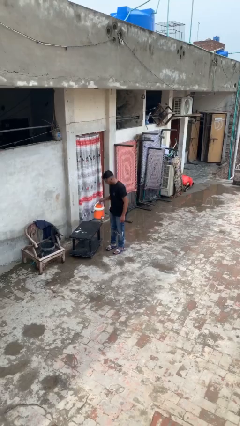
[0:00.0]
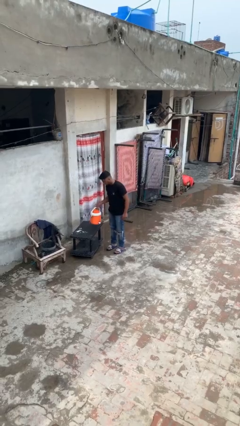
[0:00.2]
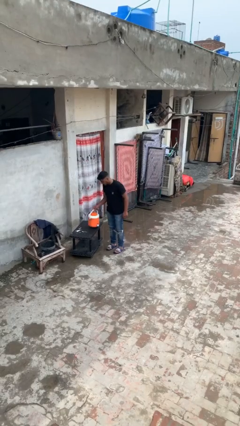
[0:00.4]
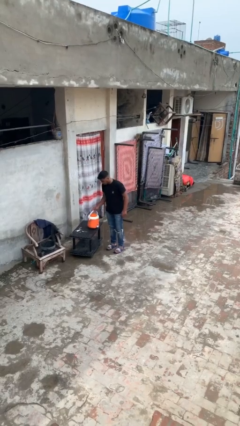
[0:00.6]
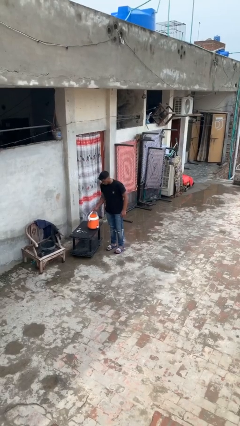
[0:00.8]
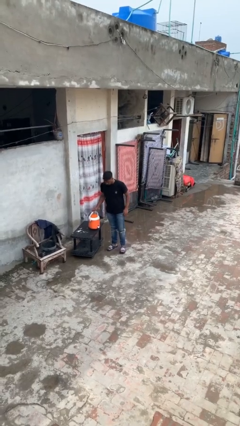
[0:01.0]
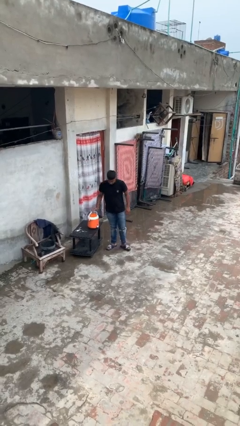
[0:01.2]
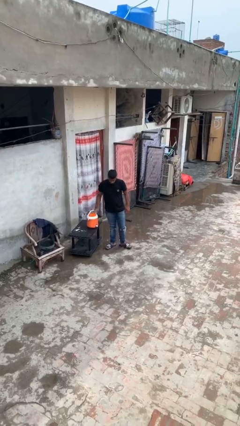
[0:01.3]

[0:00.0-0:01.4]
person puts down object on table

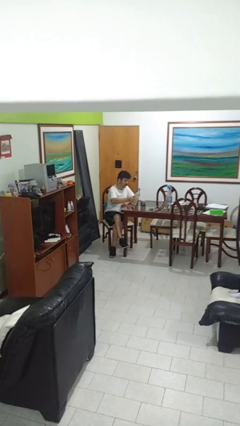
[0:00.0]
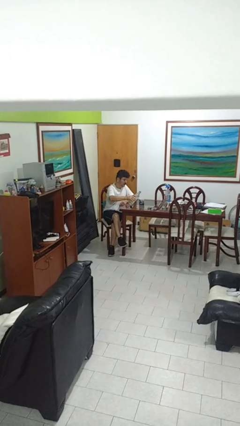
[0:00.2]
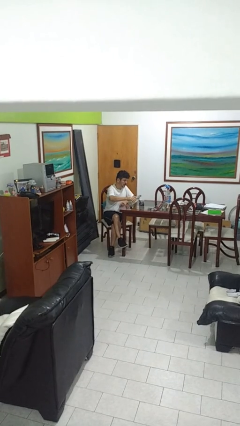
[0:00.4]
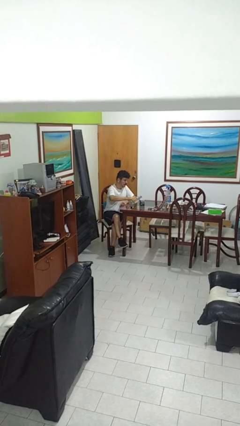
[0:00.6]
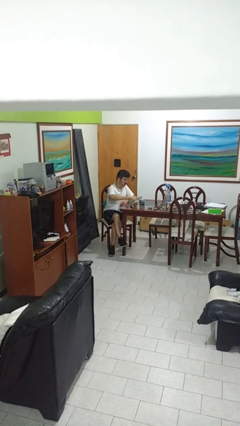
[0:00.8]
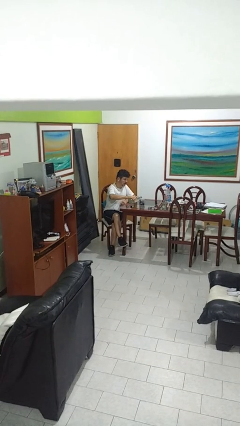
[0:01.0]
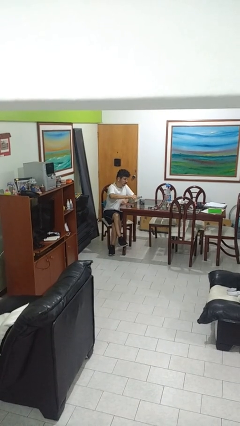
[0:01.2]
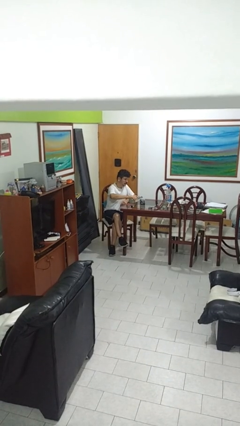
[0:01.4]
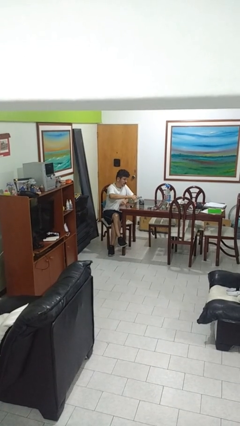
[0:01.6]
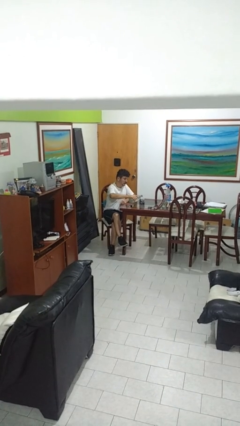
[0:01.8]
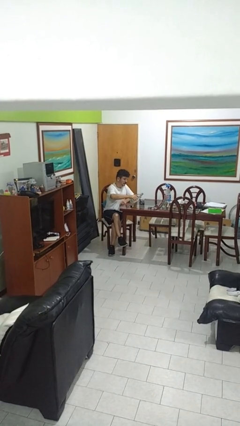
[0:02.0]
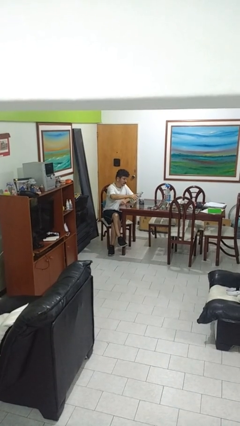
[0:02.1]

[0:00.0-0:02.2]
person pours liquid into cup

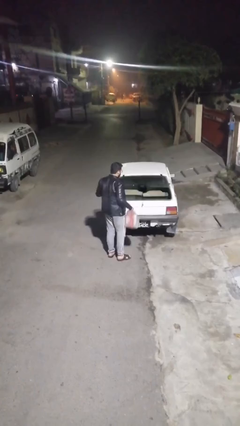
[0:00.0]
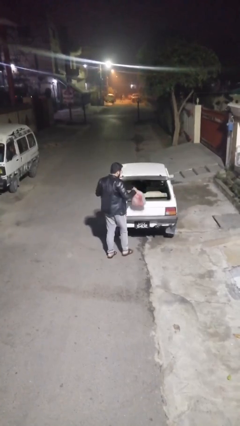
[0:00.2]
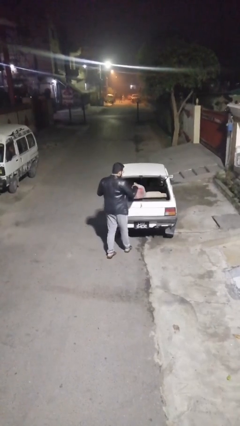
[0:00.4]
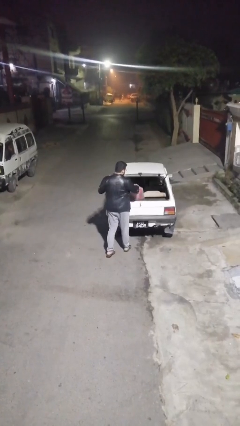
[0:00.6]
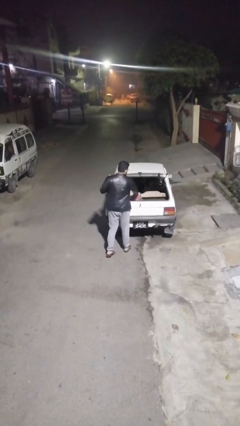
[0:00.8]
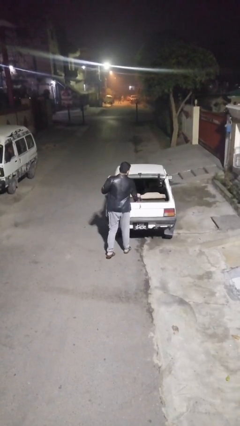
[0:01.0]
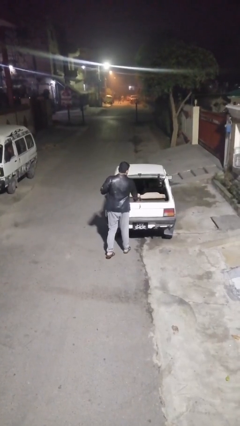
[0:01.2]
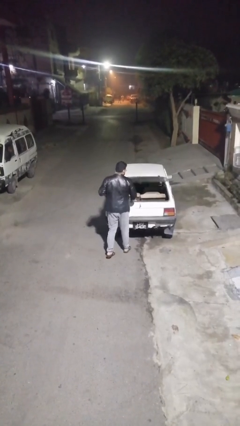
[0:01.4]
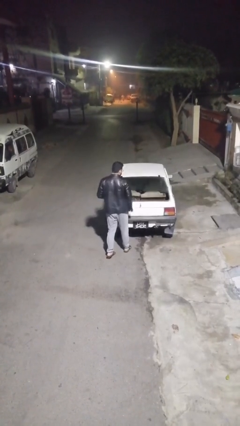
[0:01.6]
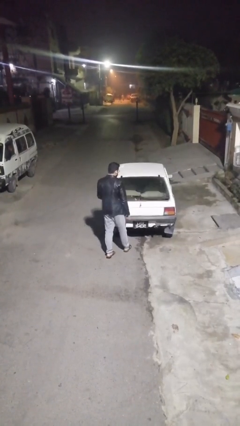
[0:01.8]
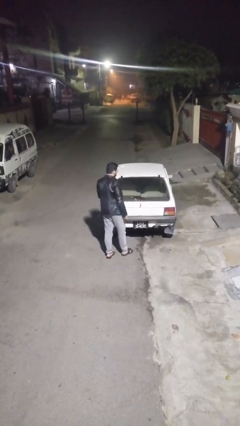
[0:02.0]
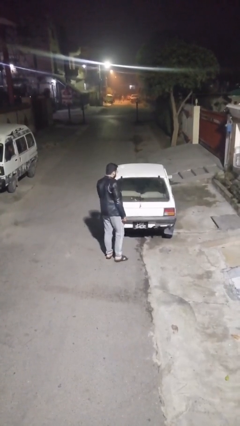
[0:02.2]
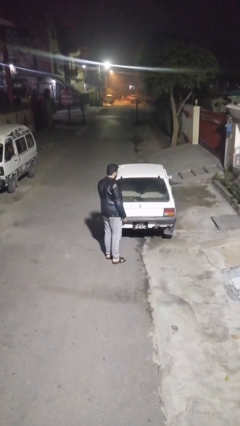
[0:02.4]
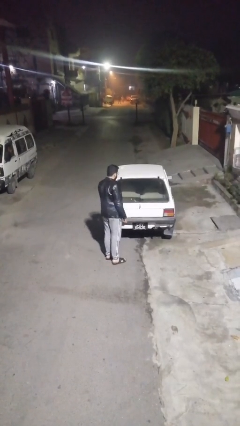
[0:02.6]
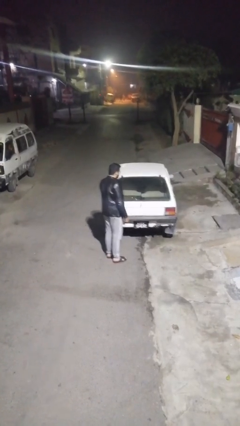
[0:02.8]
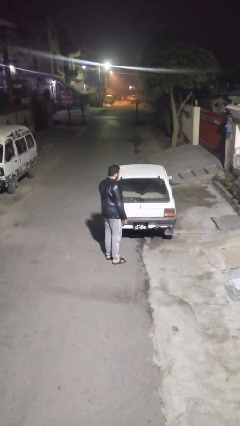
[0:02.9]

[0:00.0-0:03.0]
person loads car

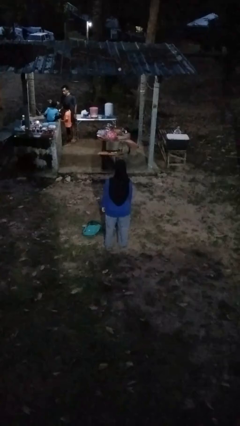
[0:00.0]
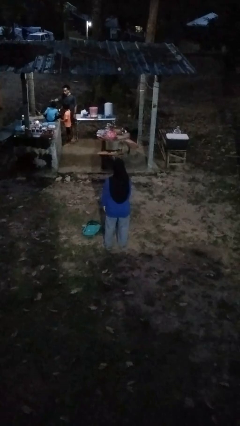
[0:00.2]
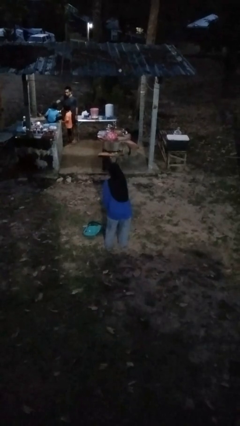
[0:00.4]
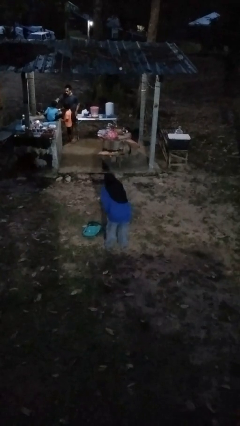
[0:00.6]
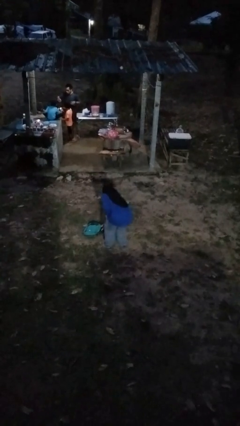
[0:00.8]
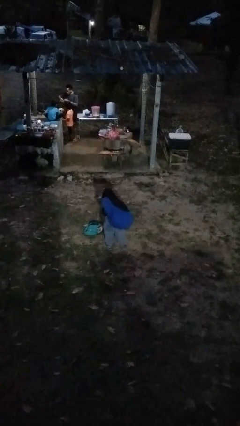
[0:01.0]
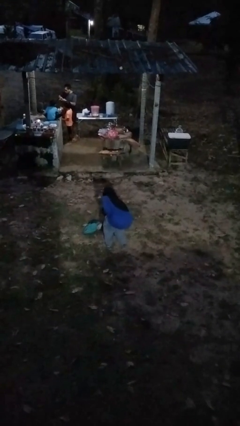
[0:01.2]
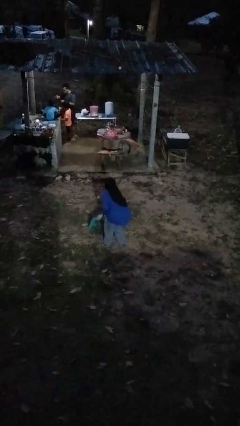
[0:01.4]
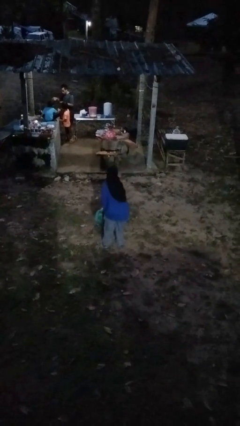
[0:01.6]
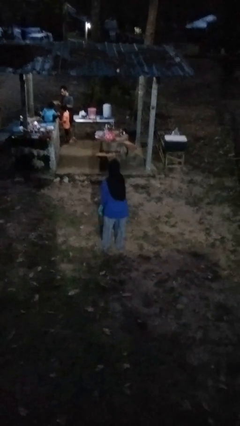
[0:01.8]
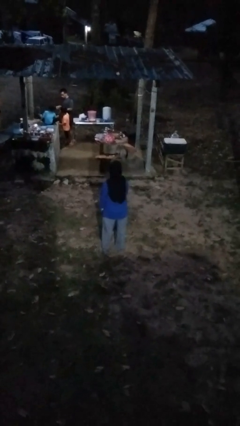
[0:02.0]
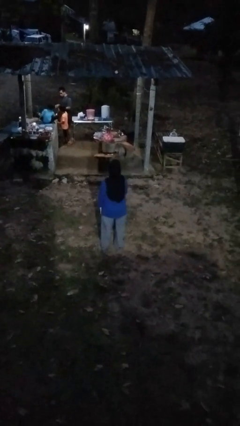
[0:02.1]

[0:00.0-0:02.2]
person picks up object from floor

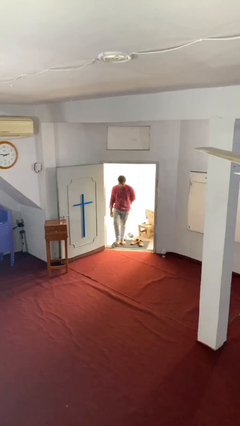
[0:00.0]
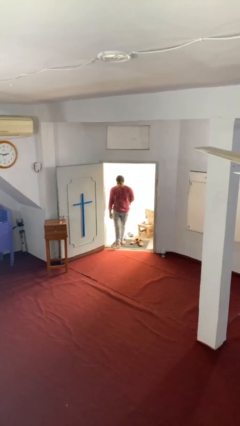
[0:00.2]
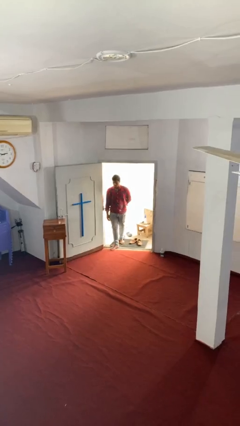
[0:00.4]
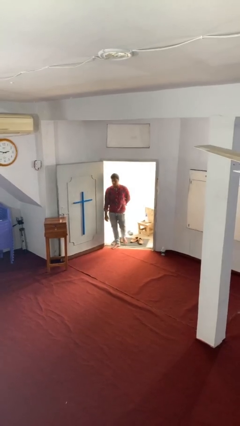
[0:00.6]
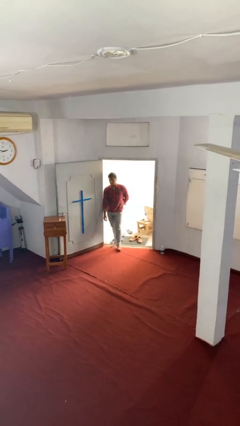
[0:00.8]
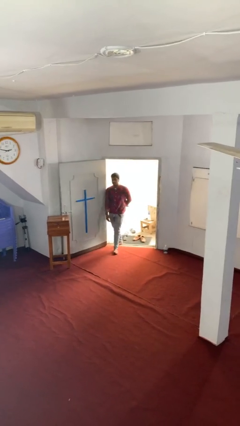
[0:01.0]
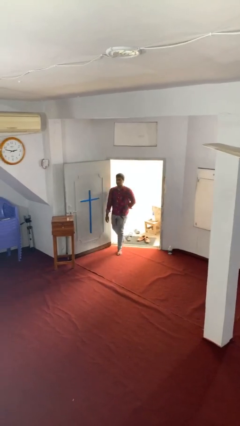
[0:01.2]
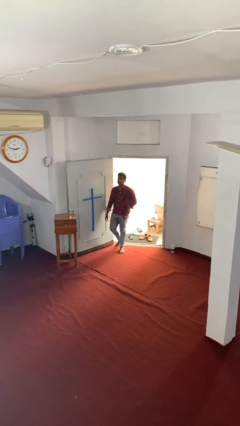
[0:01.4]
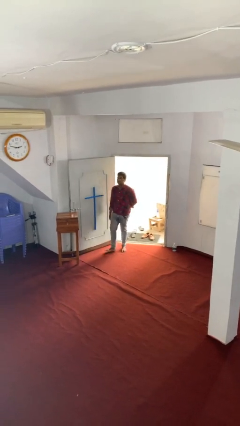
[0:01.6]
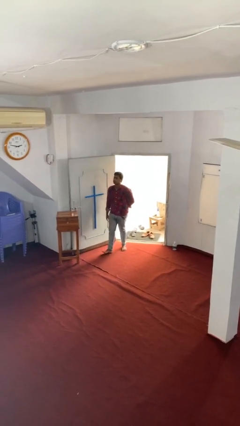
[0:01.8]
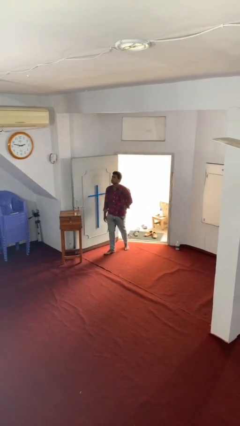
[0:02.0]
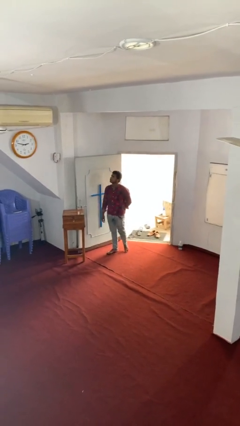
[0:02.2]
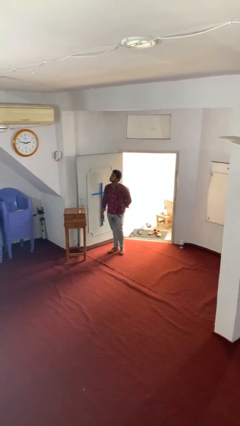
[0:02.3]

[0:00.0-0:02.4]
person enters scene through structure

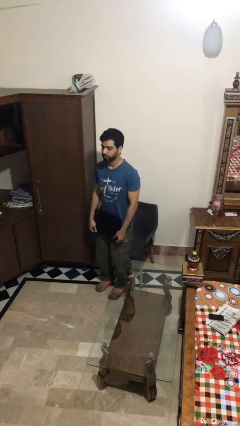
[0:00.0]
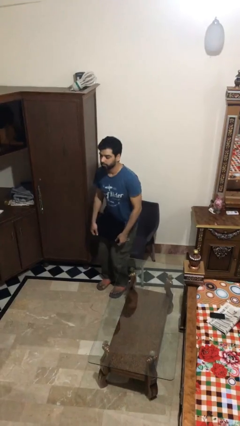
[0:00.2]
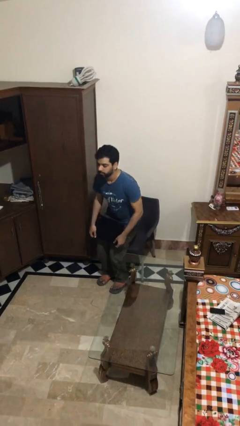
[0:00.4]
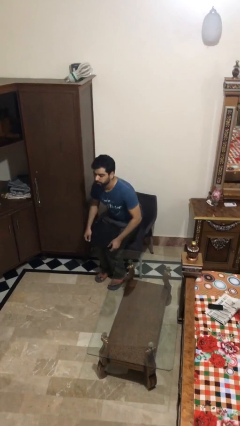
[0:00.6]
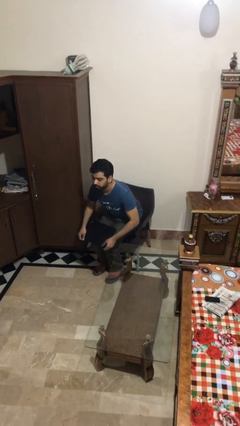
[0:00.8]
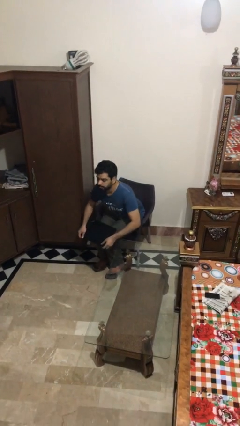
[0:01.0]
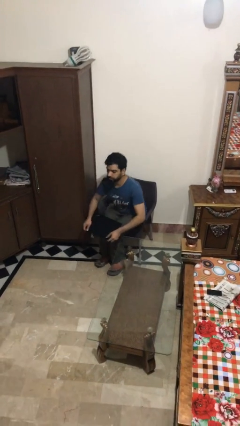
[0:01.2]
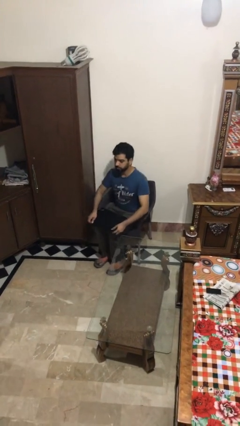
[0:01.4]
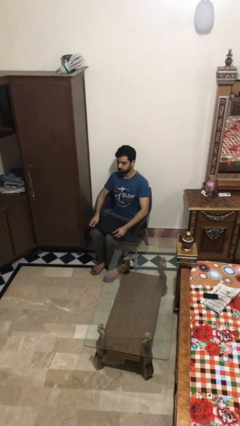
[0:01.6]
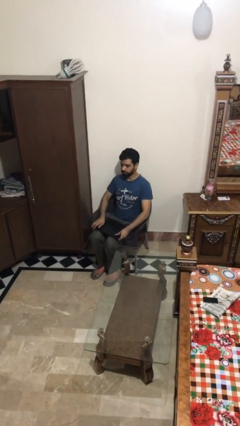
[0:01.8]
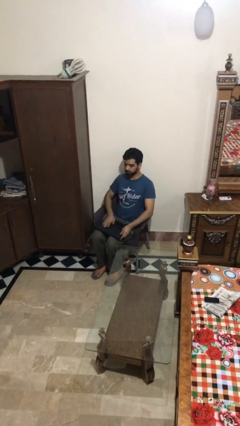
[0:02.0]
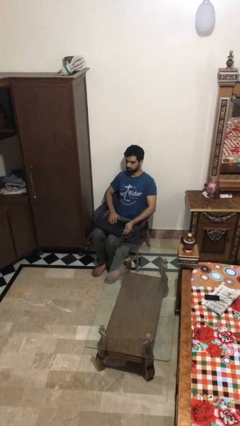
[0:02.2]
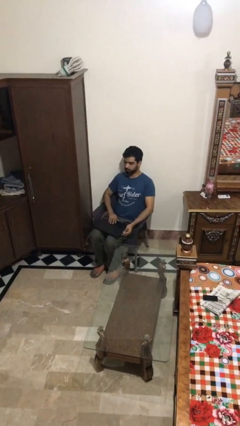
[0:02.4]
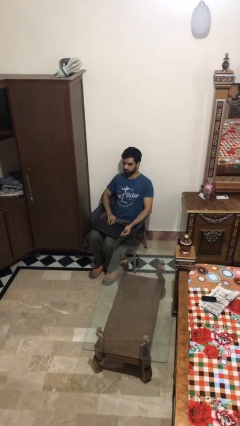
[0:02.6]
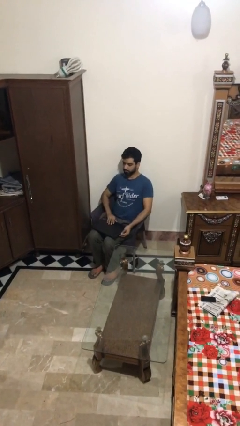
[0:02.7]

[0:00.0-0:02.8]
person sits down

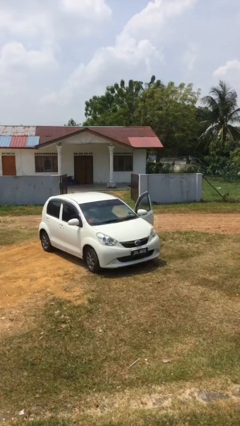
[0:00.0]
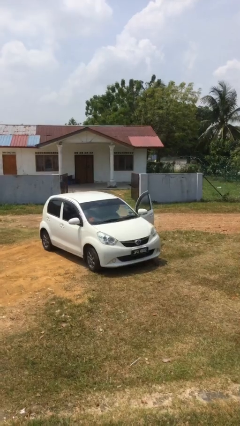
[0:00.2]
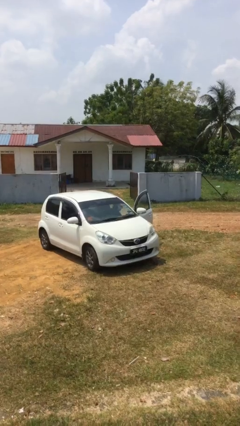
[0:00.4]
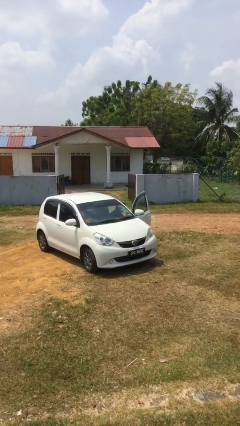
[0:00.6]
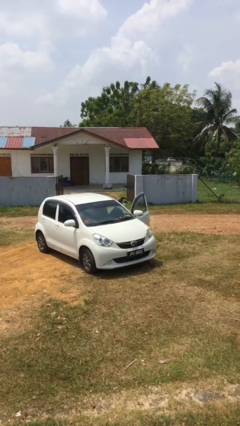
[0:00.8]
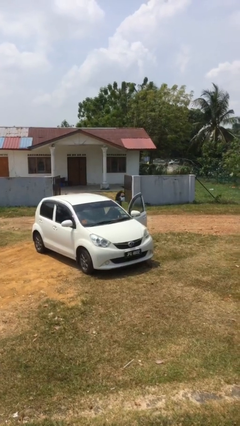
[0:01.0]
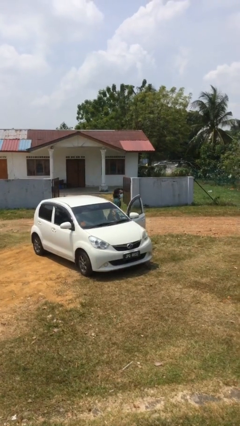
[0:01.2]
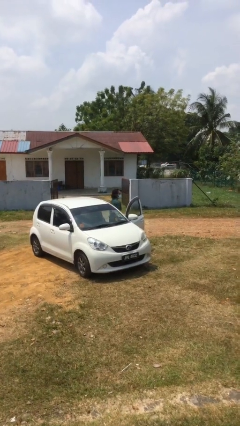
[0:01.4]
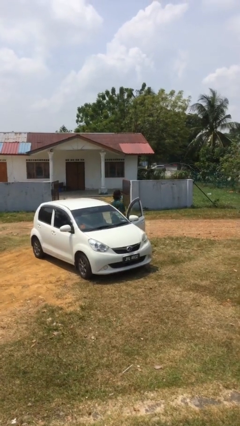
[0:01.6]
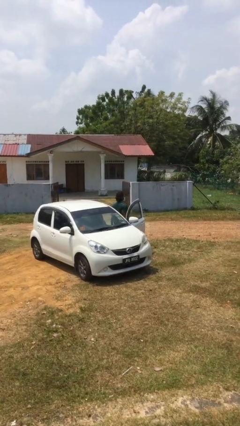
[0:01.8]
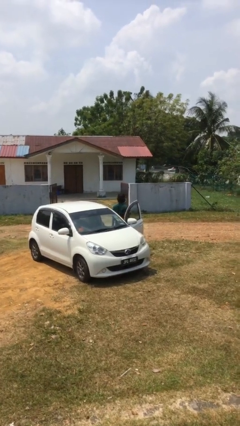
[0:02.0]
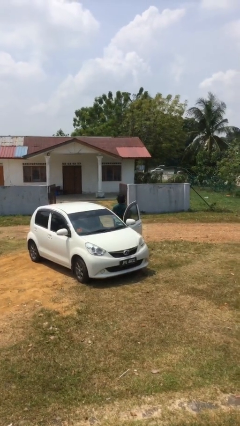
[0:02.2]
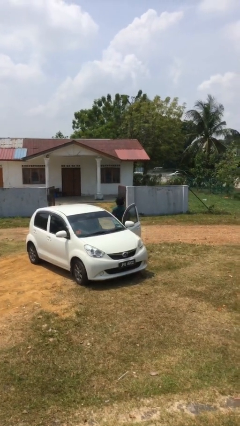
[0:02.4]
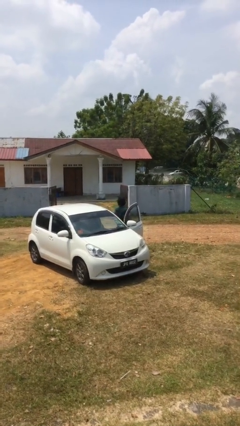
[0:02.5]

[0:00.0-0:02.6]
person exits car
